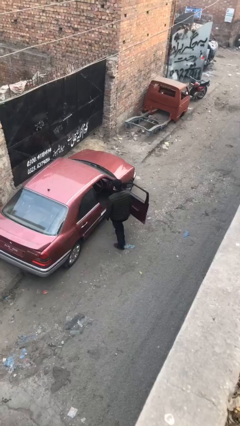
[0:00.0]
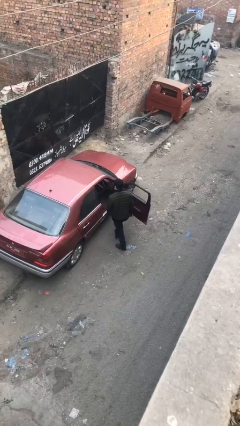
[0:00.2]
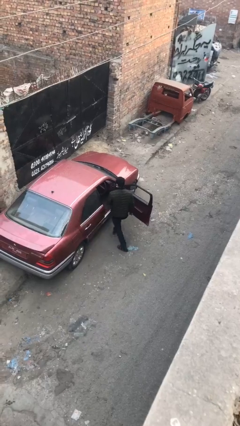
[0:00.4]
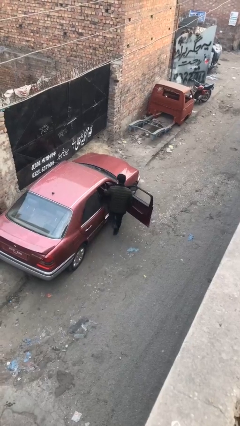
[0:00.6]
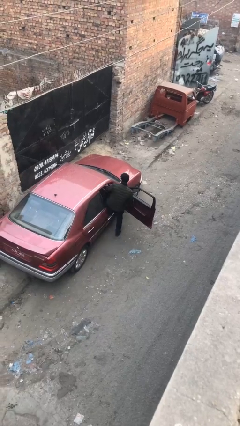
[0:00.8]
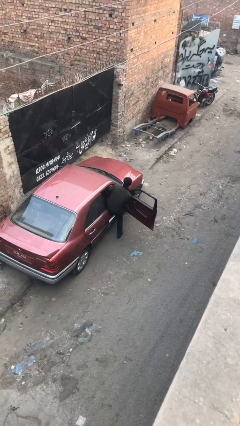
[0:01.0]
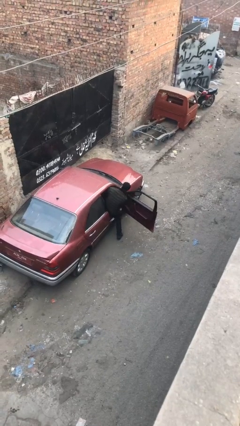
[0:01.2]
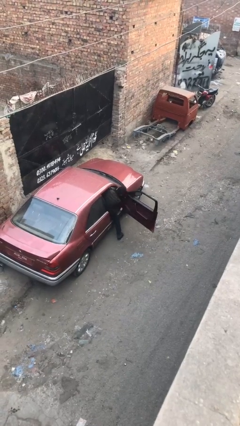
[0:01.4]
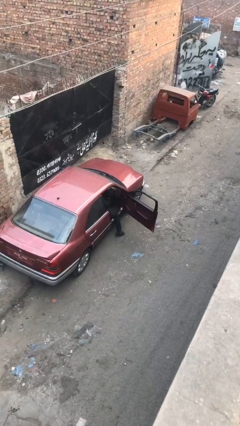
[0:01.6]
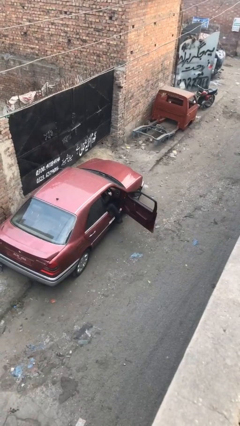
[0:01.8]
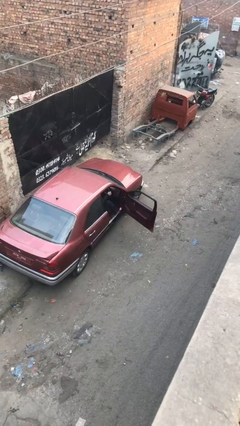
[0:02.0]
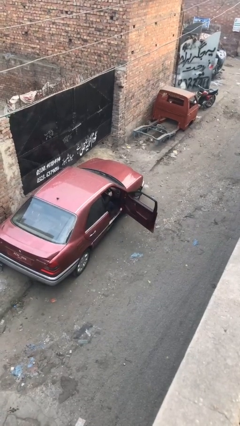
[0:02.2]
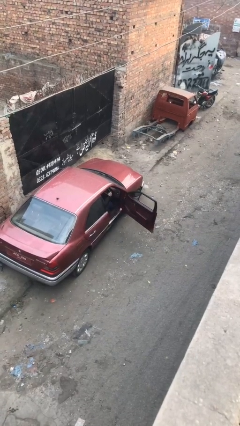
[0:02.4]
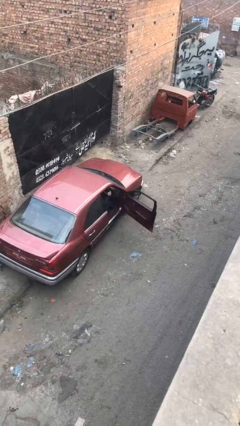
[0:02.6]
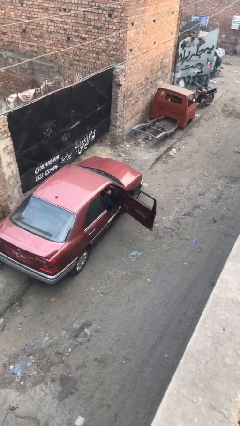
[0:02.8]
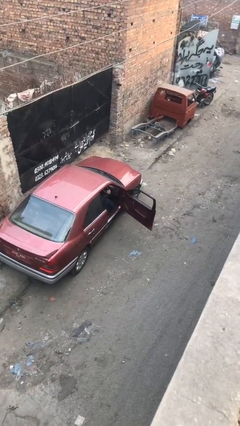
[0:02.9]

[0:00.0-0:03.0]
person enters car

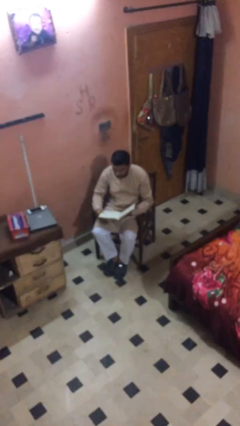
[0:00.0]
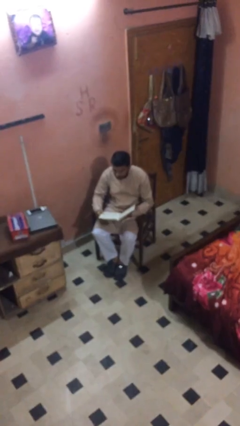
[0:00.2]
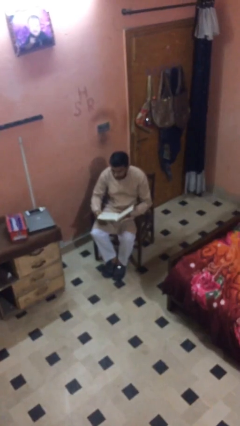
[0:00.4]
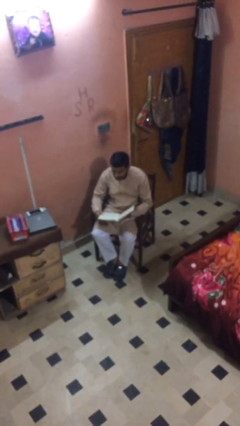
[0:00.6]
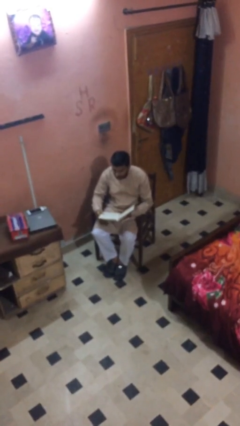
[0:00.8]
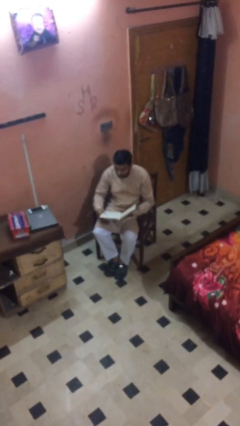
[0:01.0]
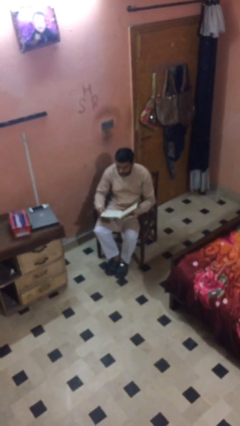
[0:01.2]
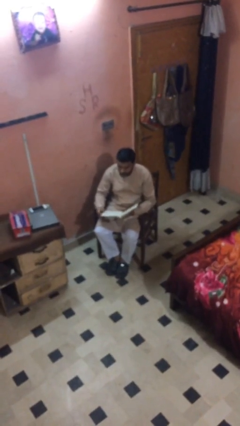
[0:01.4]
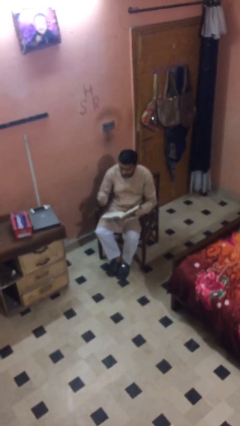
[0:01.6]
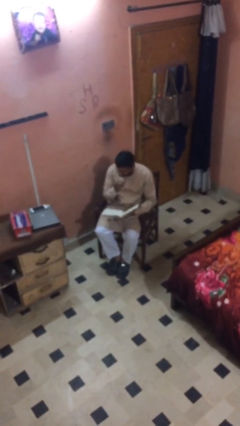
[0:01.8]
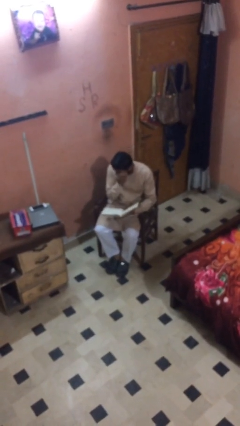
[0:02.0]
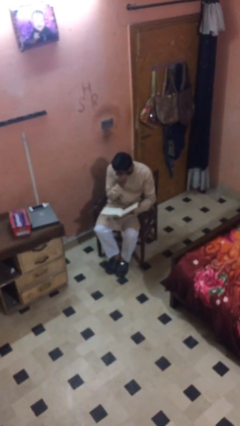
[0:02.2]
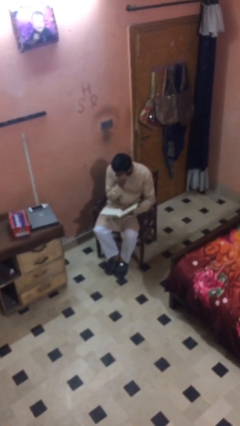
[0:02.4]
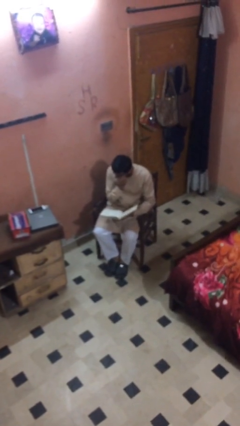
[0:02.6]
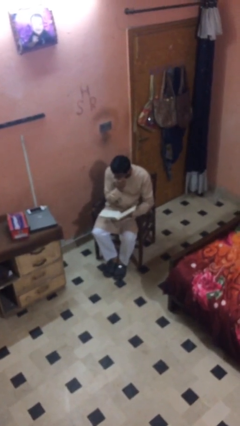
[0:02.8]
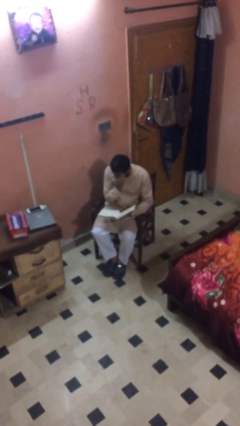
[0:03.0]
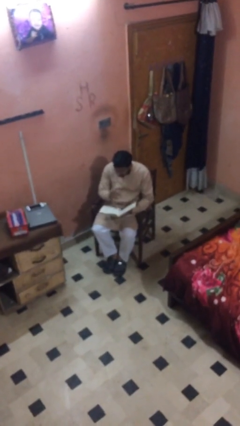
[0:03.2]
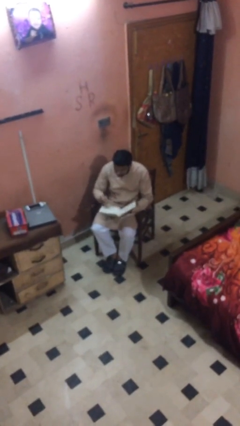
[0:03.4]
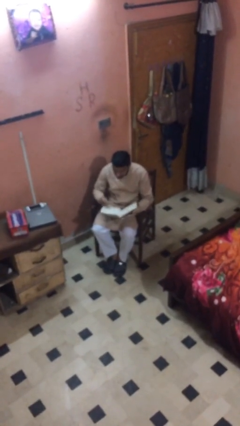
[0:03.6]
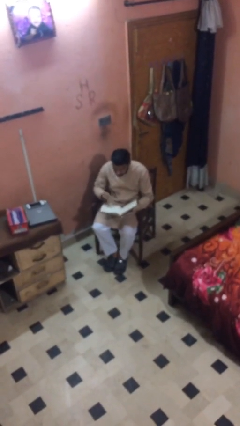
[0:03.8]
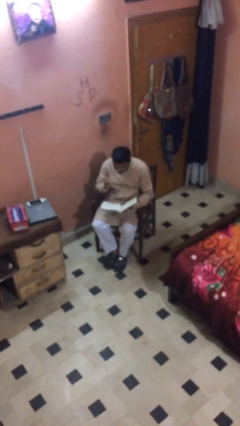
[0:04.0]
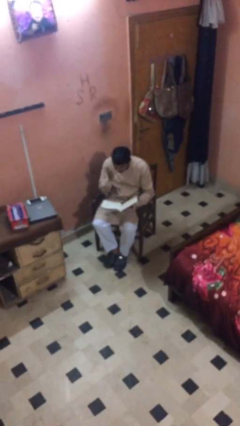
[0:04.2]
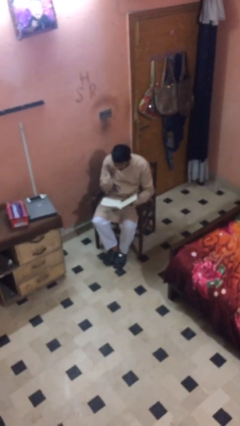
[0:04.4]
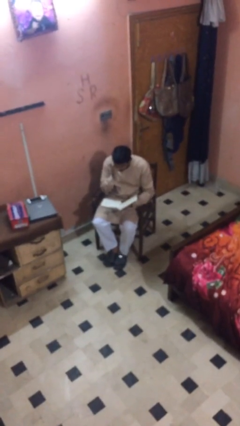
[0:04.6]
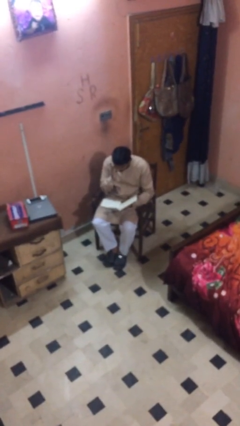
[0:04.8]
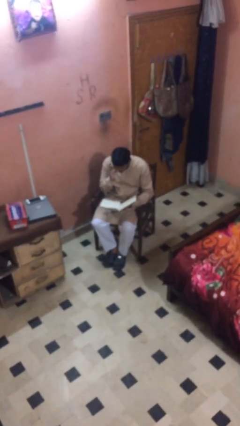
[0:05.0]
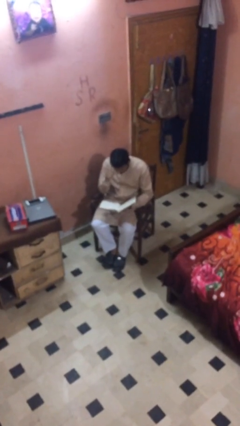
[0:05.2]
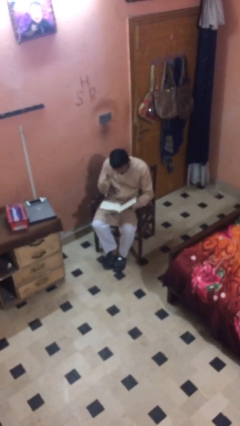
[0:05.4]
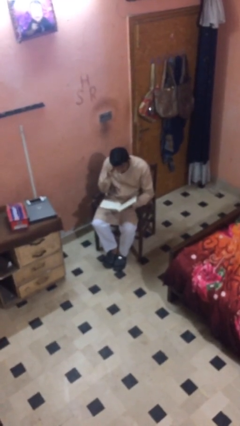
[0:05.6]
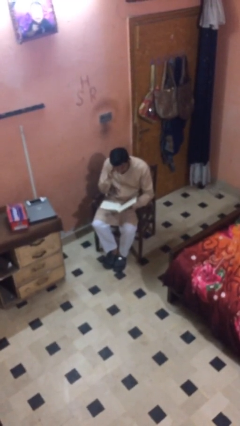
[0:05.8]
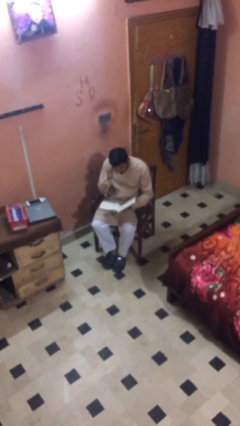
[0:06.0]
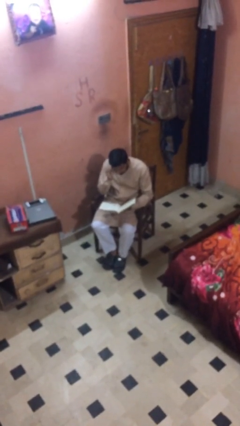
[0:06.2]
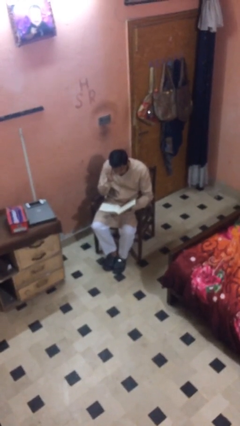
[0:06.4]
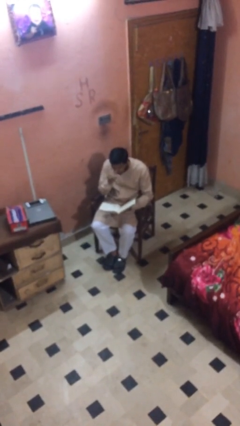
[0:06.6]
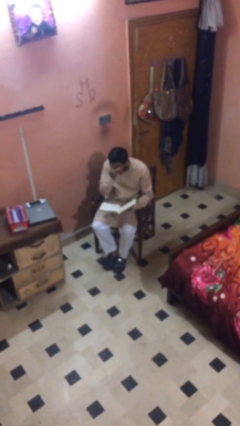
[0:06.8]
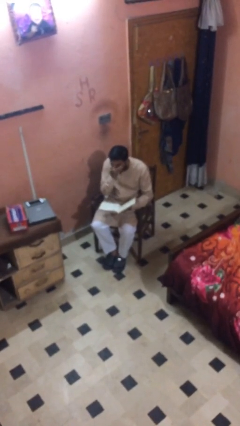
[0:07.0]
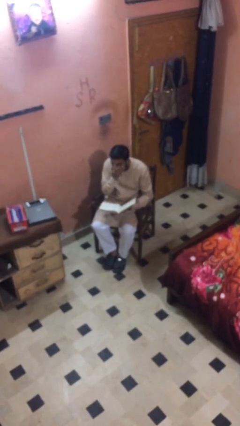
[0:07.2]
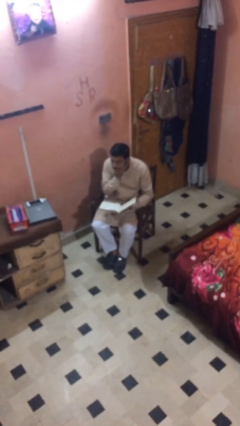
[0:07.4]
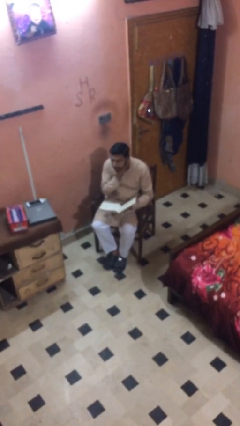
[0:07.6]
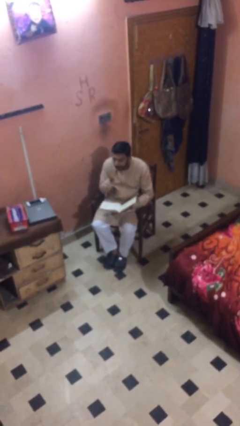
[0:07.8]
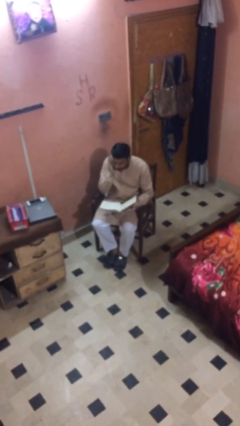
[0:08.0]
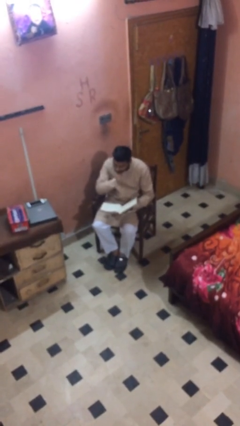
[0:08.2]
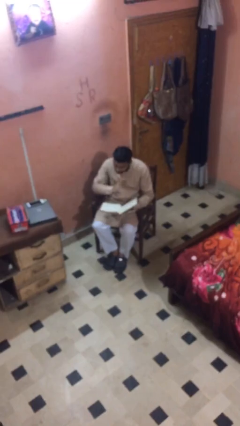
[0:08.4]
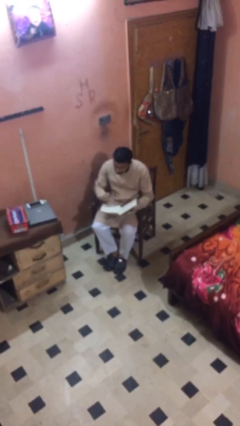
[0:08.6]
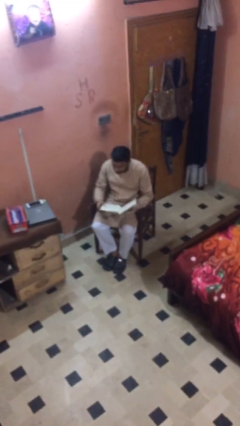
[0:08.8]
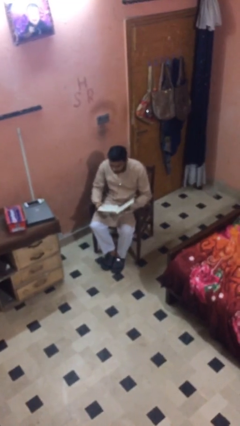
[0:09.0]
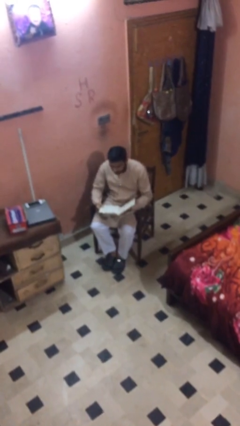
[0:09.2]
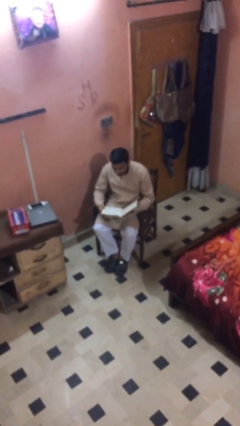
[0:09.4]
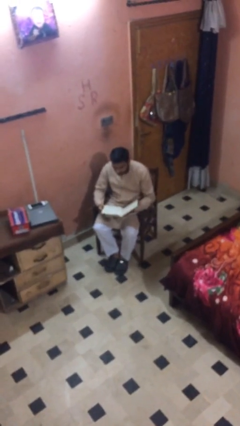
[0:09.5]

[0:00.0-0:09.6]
person reads document

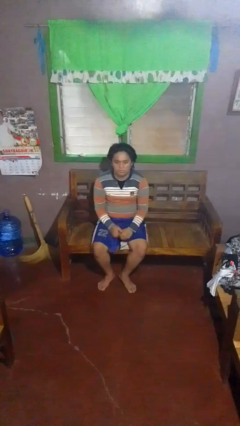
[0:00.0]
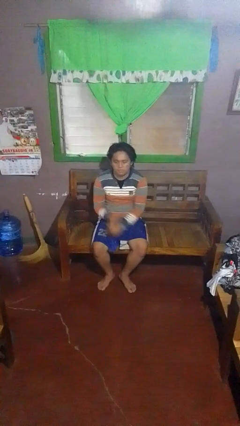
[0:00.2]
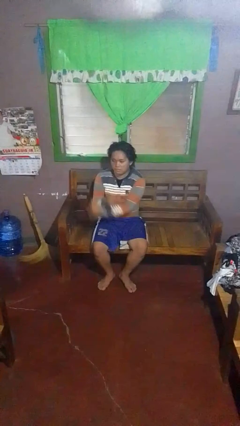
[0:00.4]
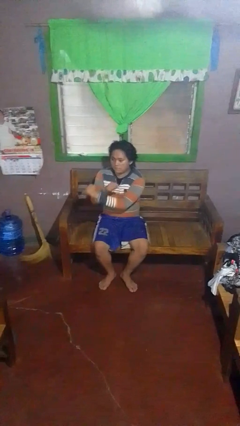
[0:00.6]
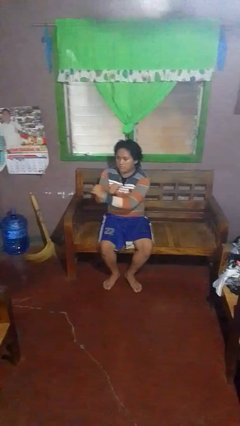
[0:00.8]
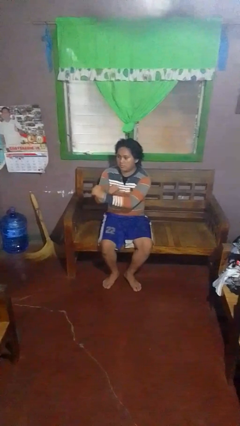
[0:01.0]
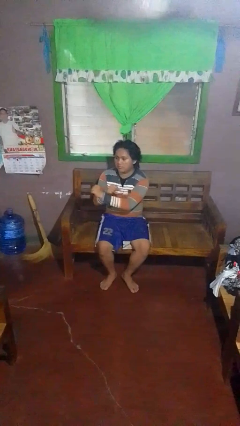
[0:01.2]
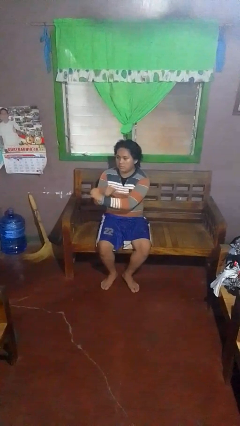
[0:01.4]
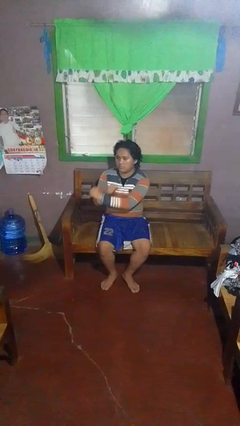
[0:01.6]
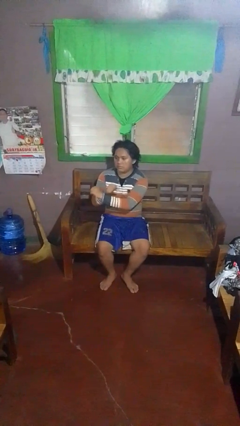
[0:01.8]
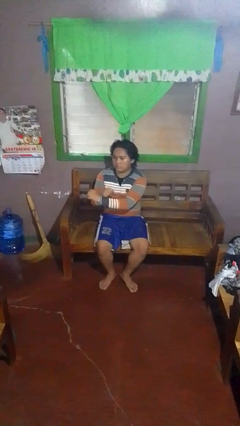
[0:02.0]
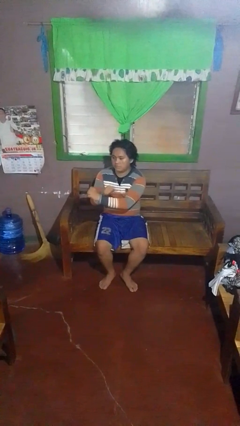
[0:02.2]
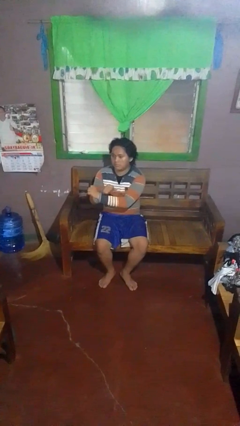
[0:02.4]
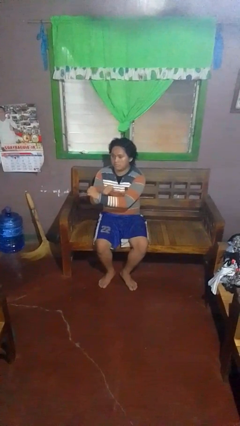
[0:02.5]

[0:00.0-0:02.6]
person gestures arms x

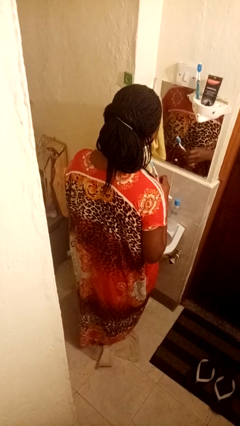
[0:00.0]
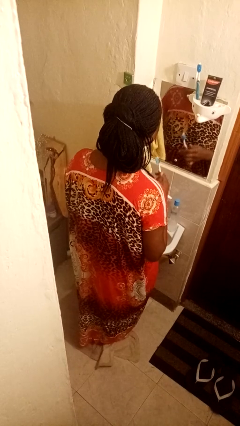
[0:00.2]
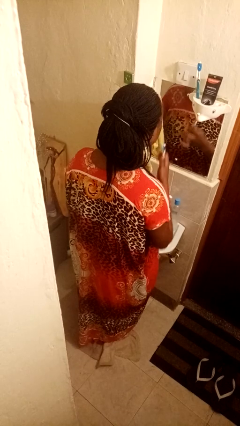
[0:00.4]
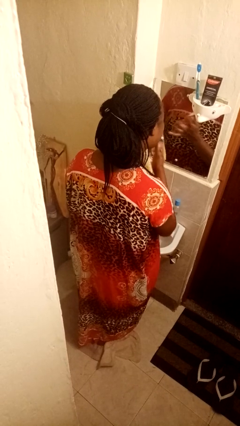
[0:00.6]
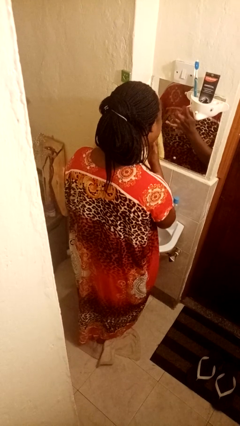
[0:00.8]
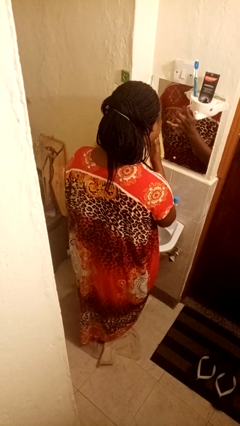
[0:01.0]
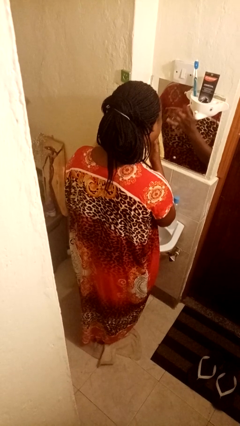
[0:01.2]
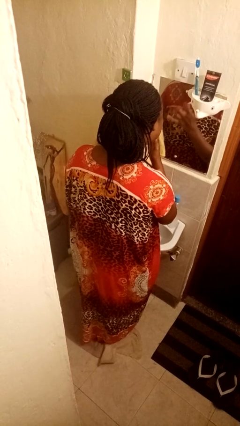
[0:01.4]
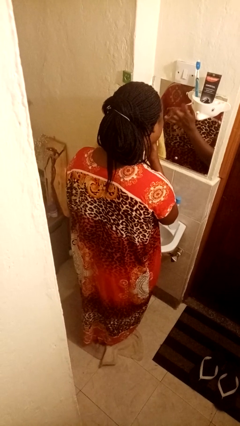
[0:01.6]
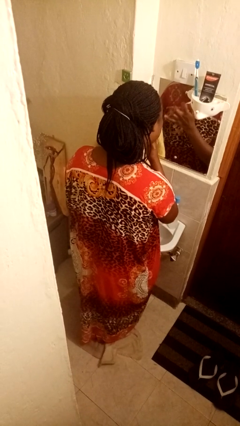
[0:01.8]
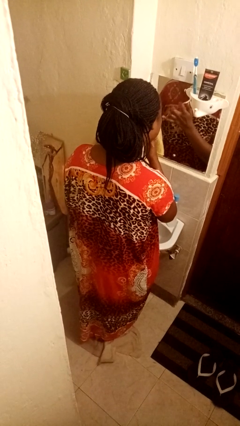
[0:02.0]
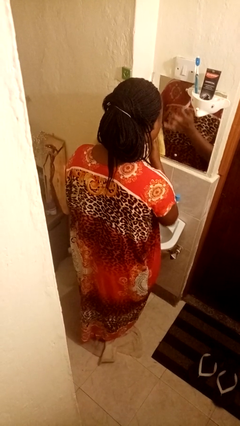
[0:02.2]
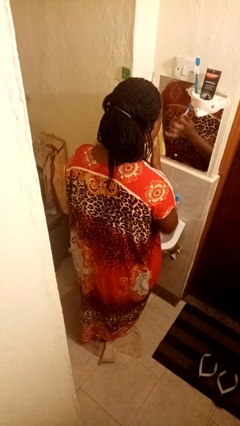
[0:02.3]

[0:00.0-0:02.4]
person brushes teeth

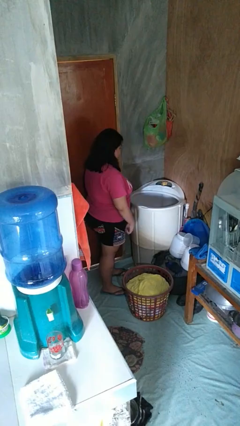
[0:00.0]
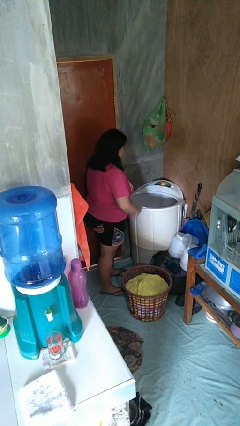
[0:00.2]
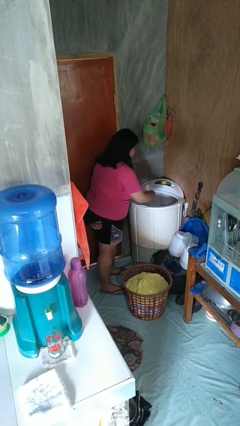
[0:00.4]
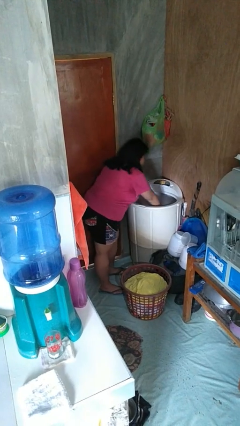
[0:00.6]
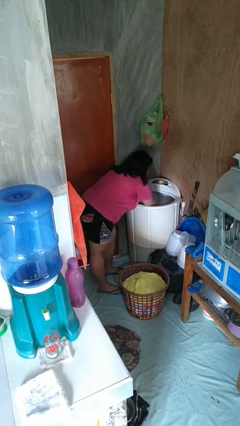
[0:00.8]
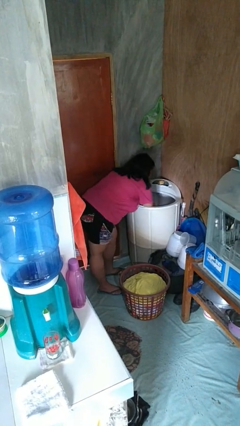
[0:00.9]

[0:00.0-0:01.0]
person unloads clotheswasher
